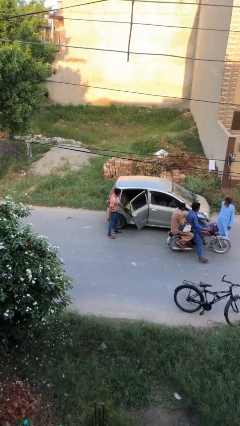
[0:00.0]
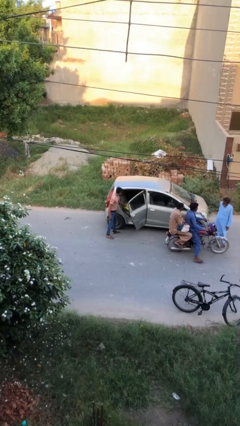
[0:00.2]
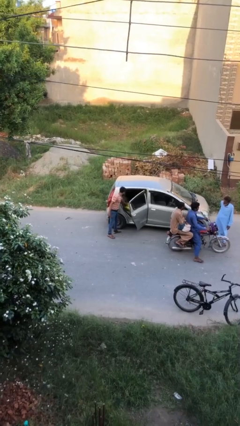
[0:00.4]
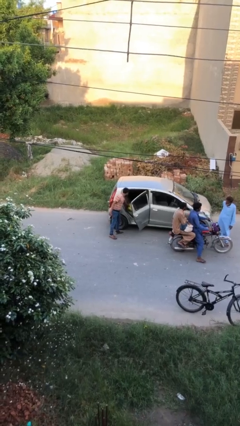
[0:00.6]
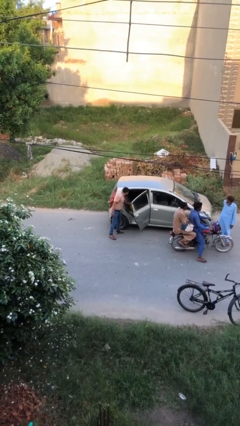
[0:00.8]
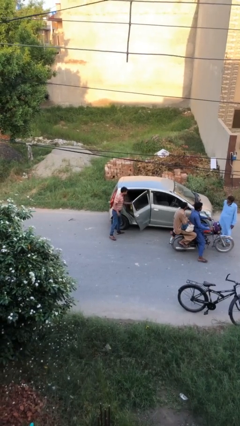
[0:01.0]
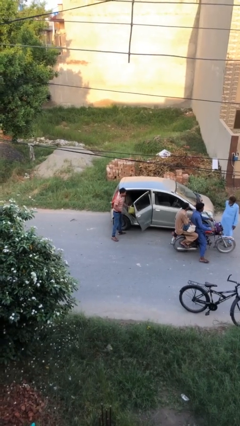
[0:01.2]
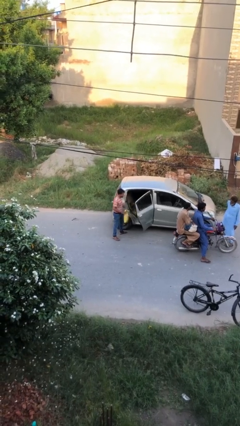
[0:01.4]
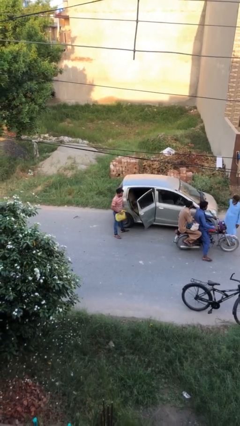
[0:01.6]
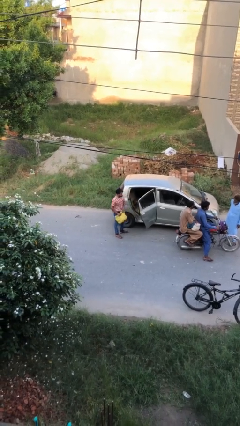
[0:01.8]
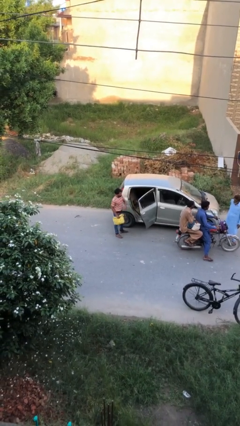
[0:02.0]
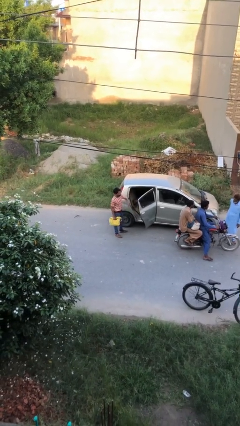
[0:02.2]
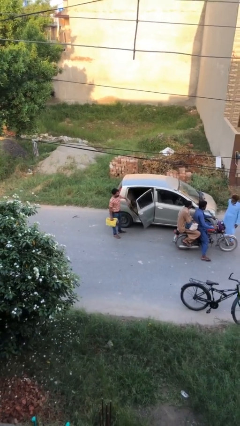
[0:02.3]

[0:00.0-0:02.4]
person unloads car

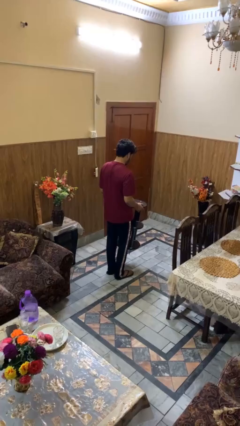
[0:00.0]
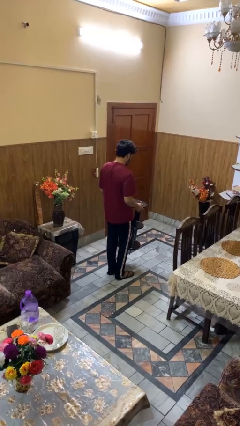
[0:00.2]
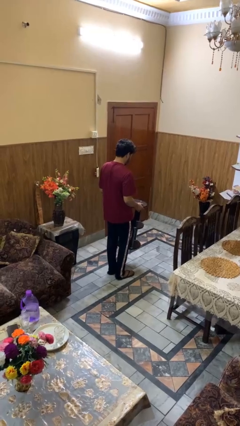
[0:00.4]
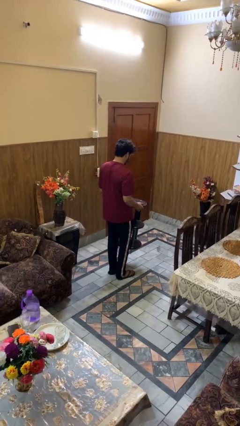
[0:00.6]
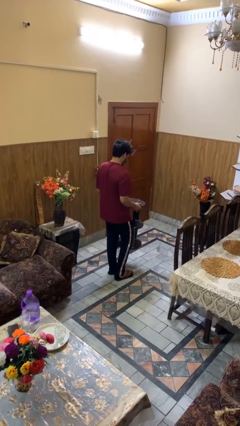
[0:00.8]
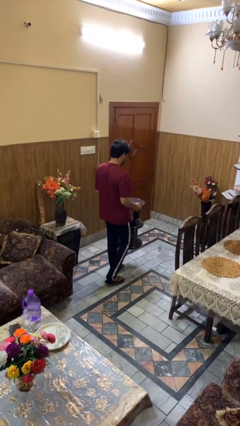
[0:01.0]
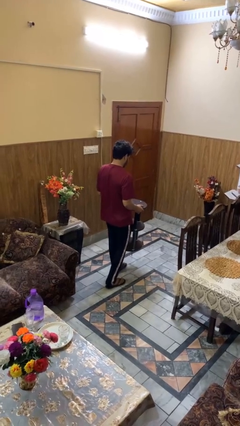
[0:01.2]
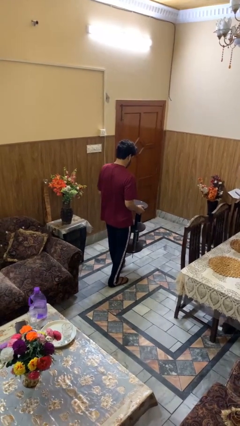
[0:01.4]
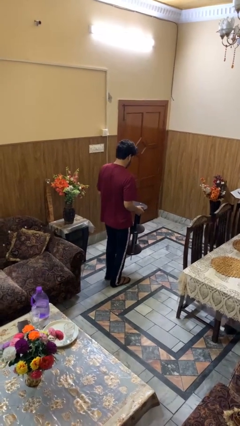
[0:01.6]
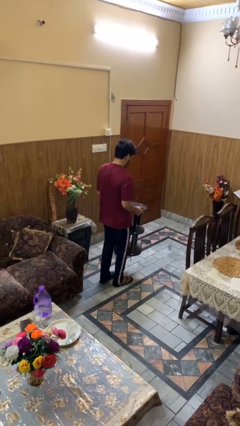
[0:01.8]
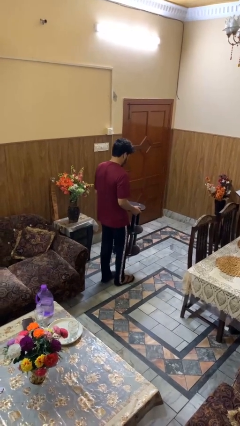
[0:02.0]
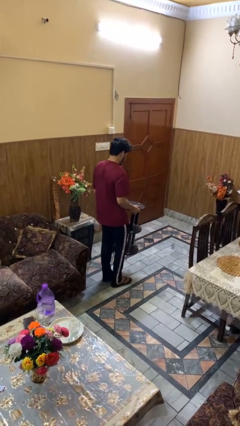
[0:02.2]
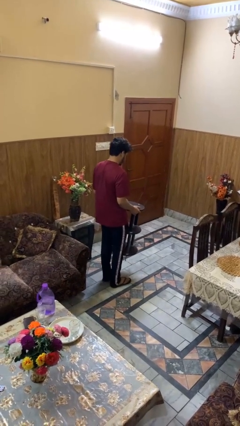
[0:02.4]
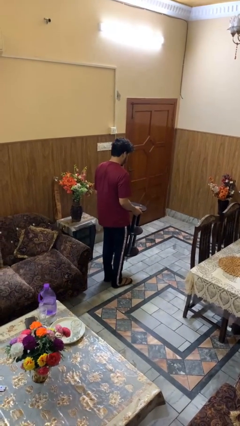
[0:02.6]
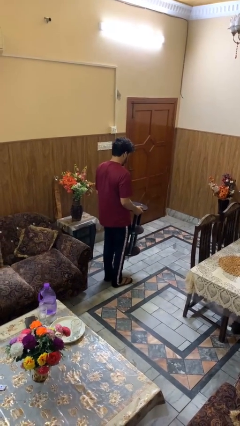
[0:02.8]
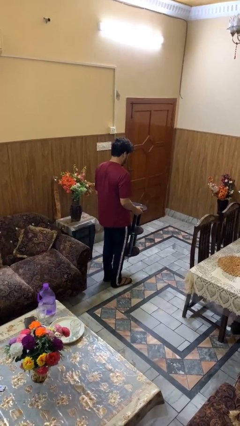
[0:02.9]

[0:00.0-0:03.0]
person carries furniture

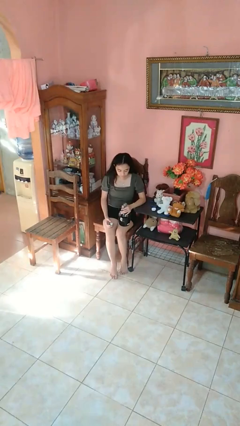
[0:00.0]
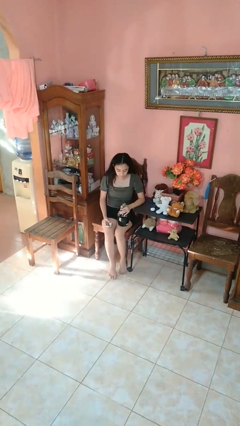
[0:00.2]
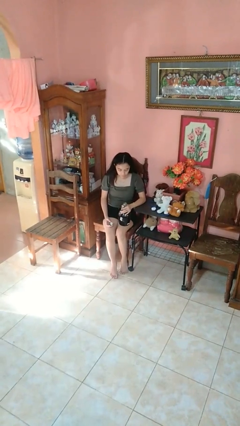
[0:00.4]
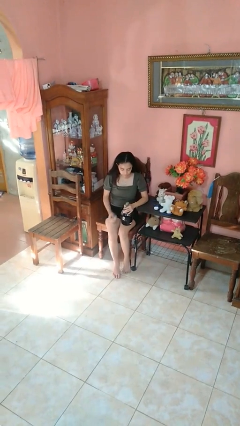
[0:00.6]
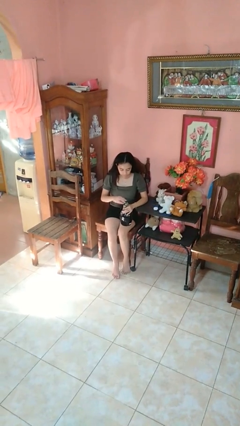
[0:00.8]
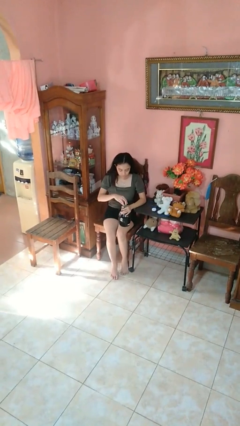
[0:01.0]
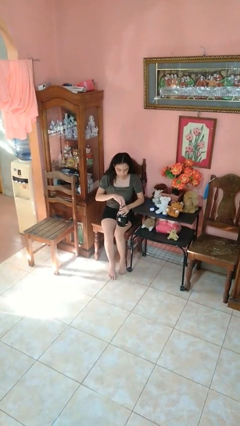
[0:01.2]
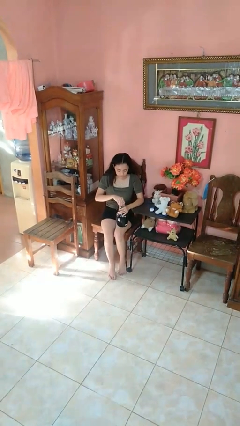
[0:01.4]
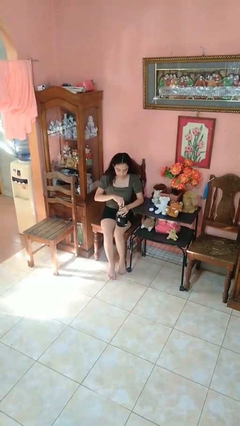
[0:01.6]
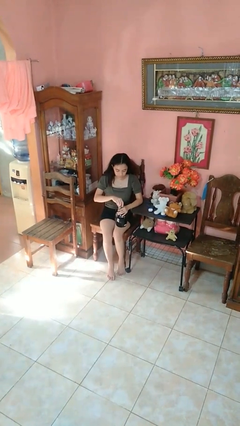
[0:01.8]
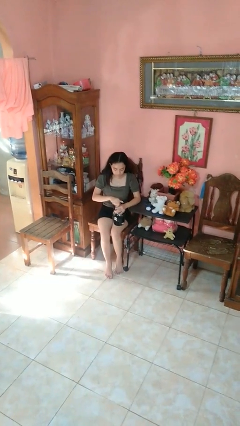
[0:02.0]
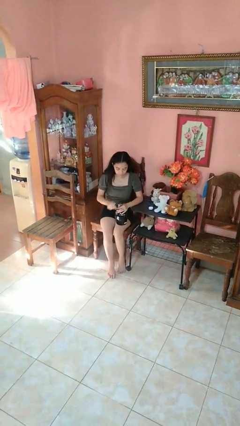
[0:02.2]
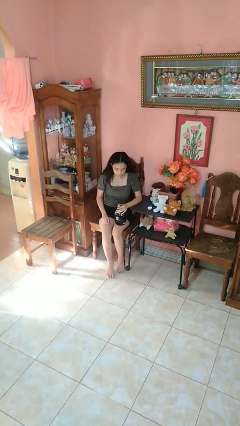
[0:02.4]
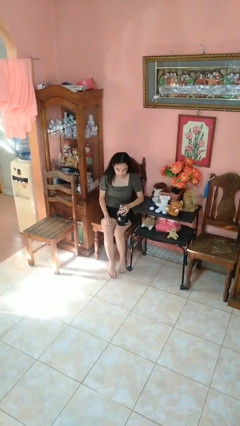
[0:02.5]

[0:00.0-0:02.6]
person screws lid to bottle

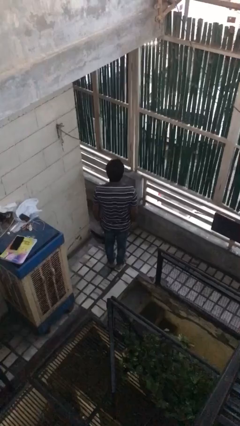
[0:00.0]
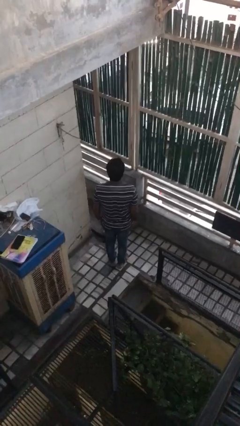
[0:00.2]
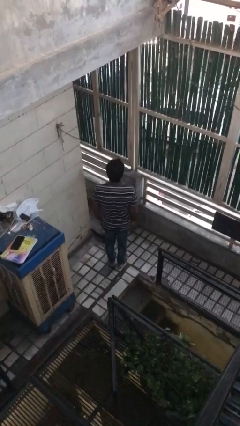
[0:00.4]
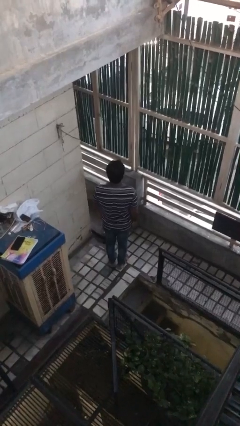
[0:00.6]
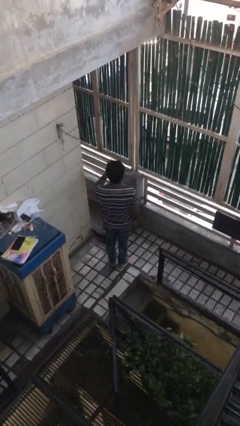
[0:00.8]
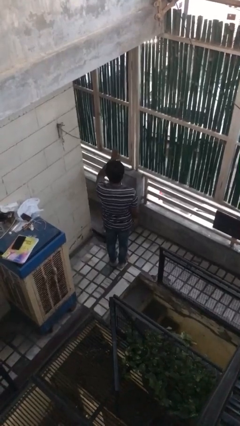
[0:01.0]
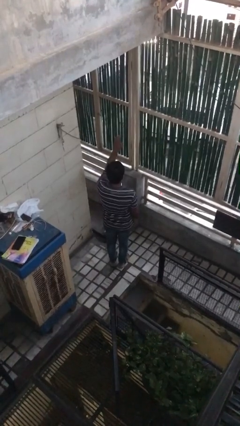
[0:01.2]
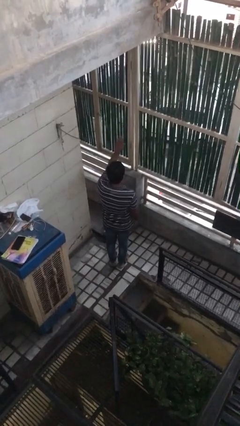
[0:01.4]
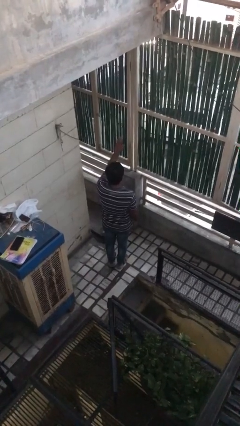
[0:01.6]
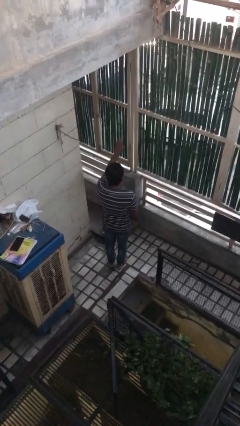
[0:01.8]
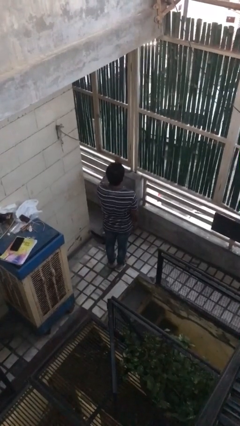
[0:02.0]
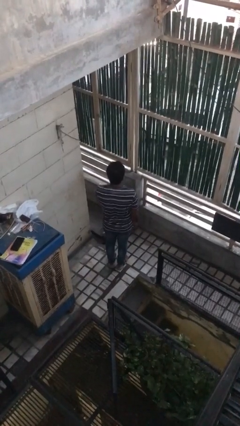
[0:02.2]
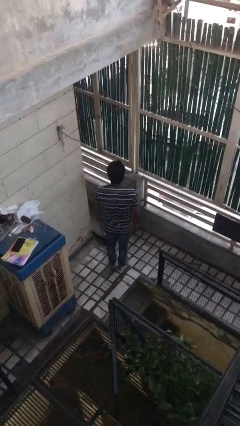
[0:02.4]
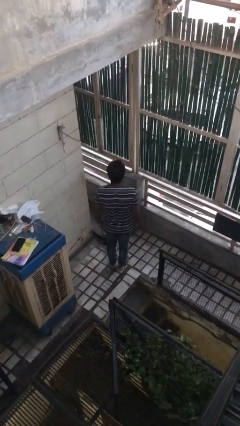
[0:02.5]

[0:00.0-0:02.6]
person gestures stop

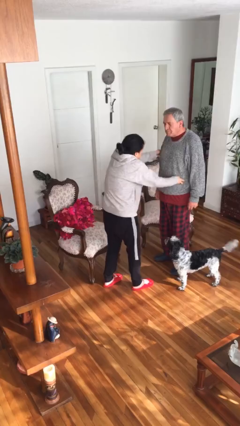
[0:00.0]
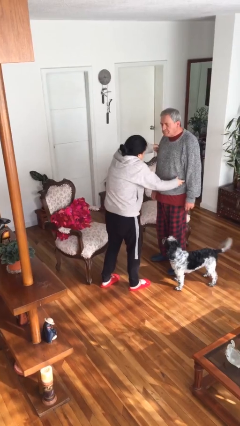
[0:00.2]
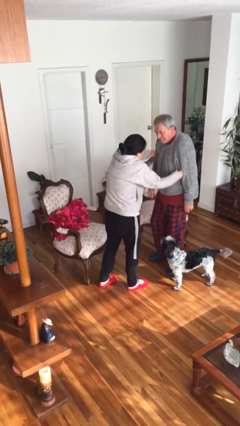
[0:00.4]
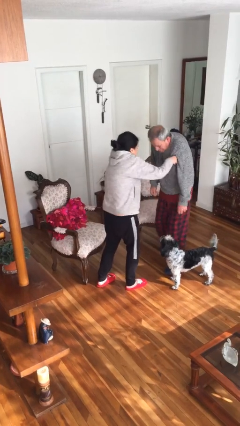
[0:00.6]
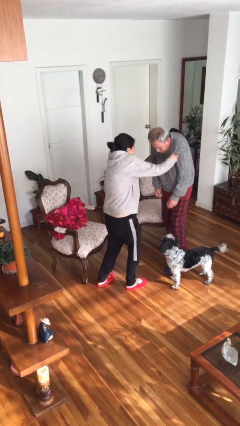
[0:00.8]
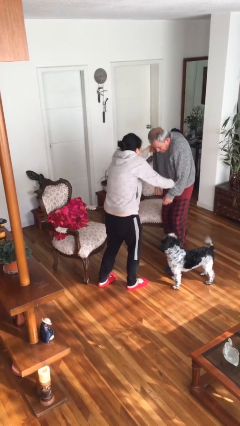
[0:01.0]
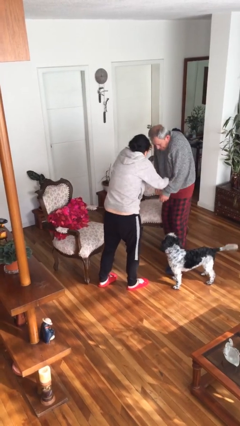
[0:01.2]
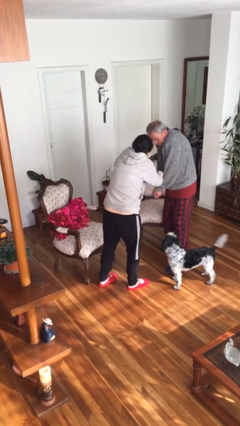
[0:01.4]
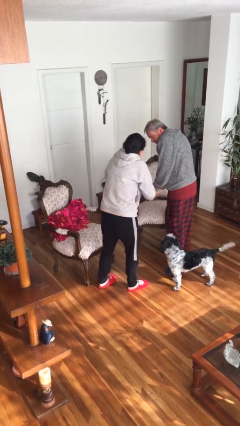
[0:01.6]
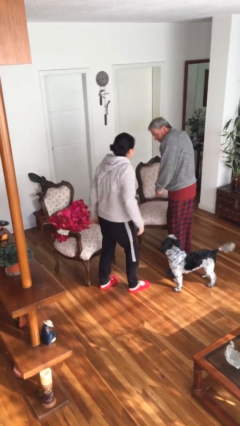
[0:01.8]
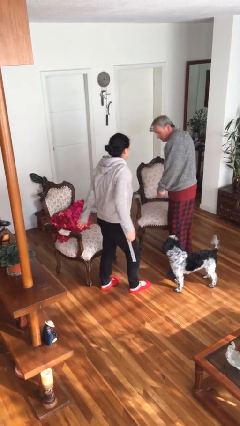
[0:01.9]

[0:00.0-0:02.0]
person tickles person

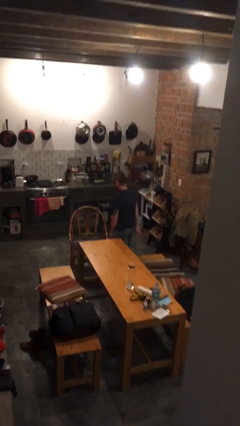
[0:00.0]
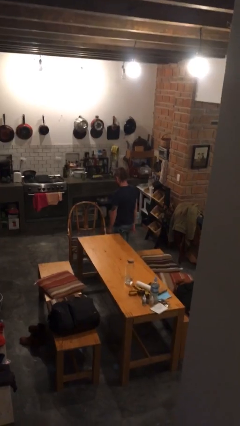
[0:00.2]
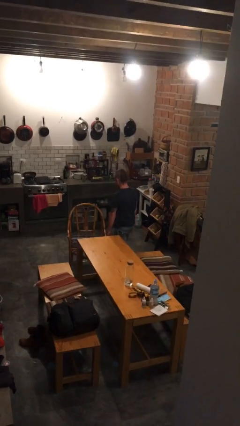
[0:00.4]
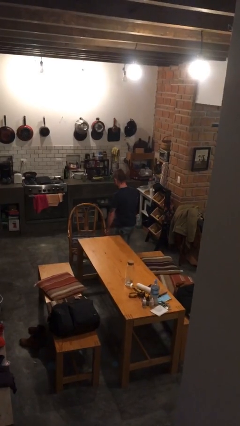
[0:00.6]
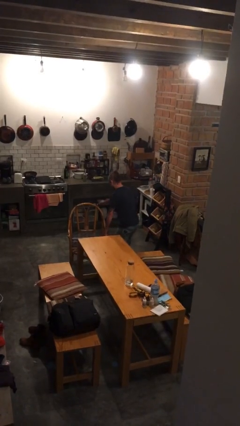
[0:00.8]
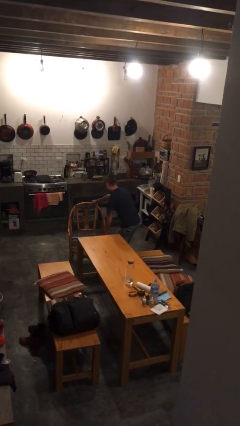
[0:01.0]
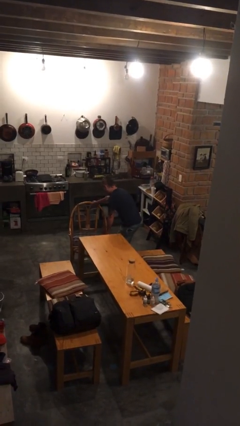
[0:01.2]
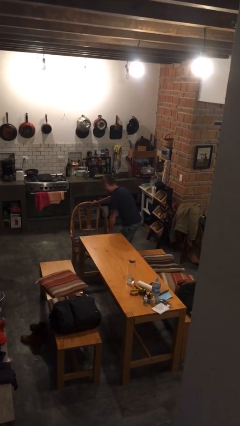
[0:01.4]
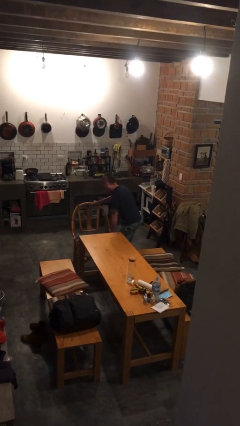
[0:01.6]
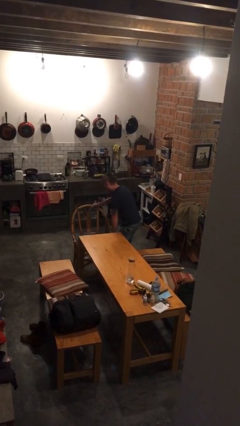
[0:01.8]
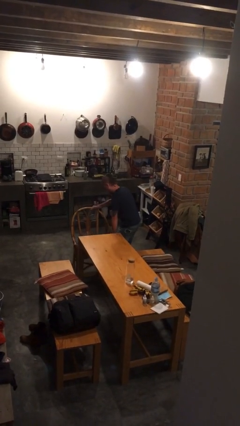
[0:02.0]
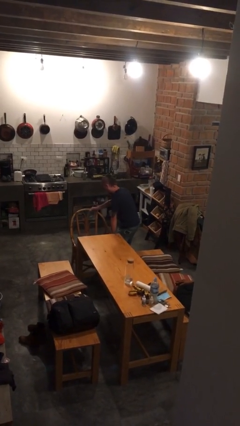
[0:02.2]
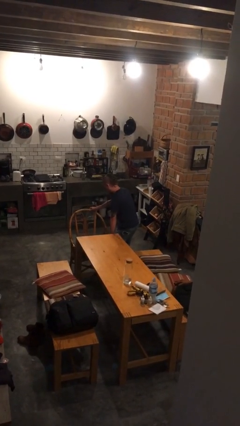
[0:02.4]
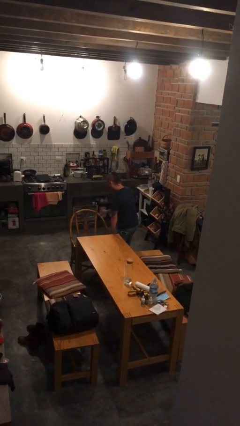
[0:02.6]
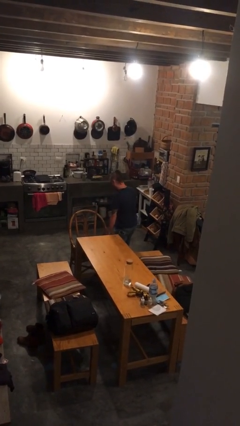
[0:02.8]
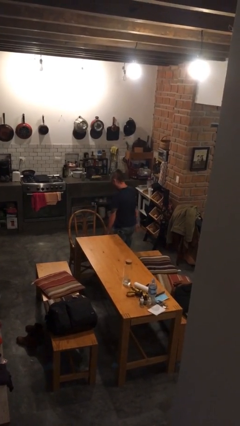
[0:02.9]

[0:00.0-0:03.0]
person pushes in chair

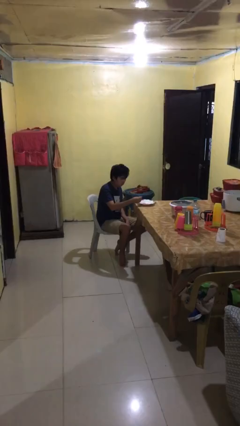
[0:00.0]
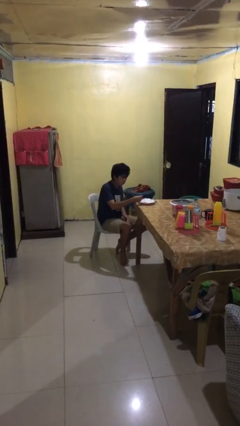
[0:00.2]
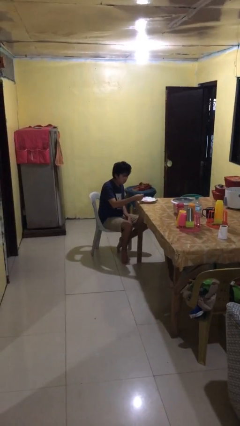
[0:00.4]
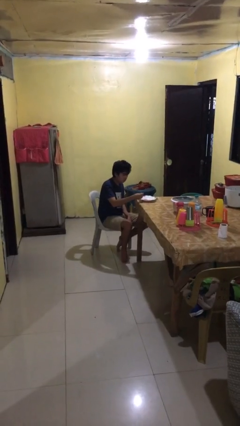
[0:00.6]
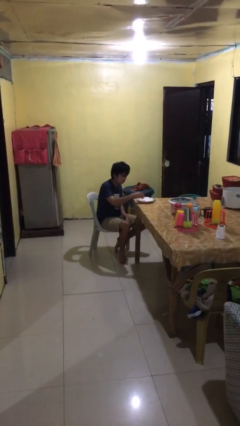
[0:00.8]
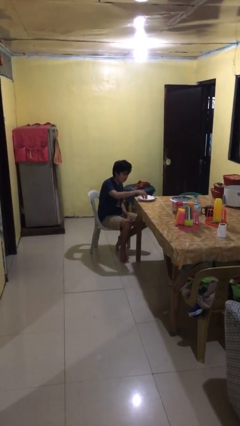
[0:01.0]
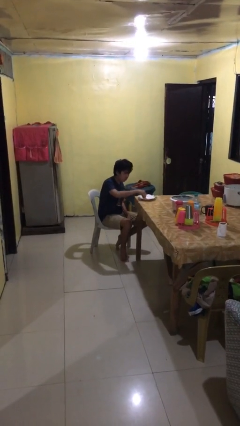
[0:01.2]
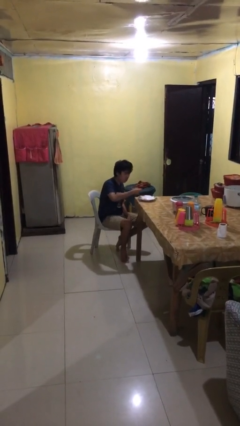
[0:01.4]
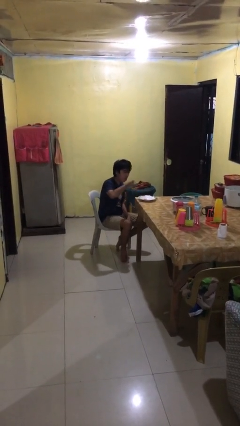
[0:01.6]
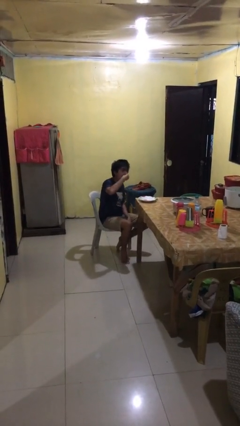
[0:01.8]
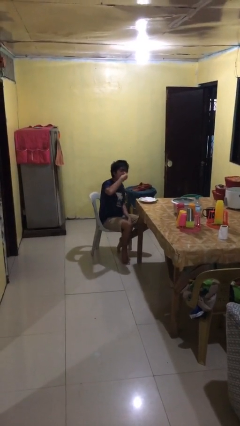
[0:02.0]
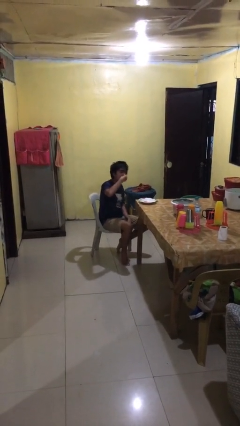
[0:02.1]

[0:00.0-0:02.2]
person eats with hands
